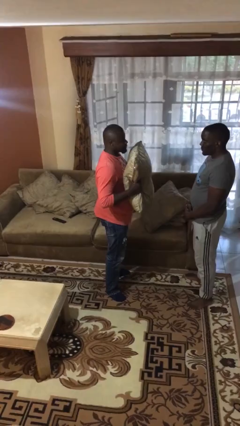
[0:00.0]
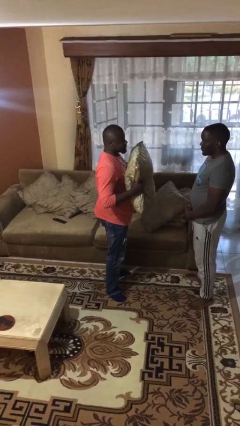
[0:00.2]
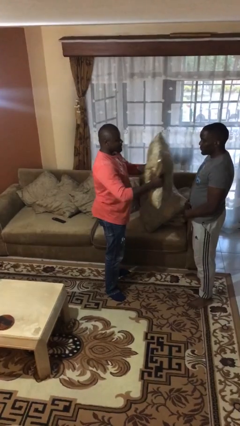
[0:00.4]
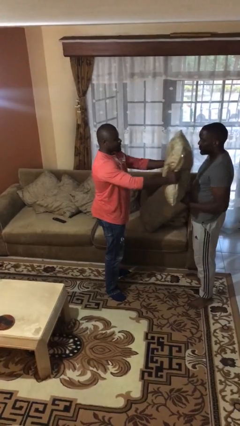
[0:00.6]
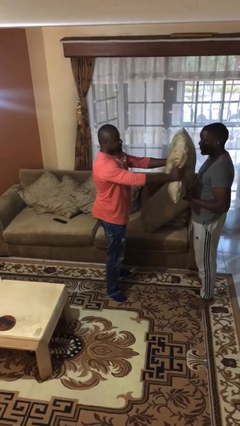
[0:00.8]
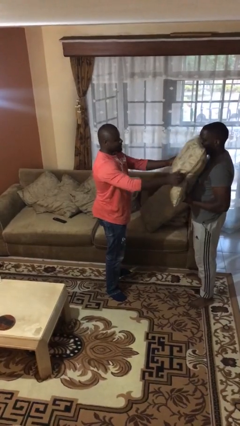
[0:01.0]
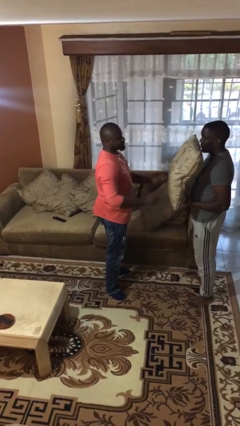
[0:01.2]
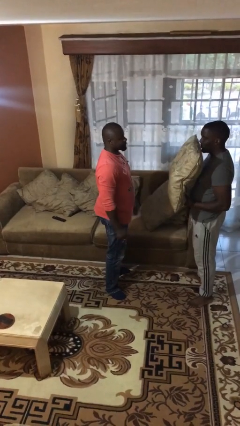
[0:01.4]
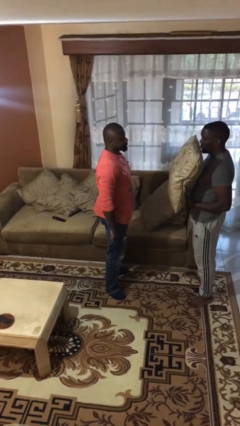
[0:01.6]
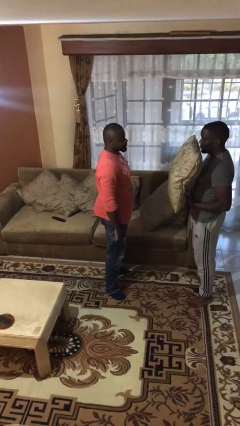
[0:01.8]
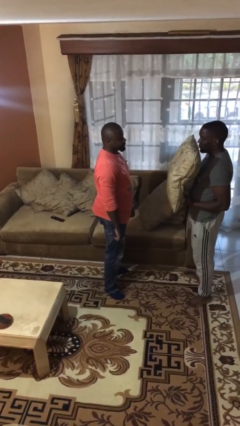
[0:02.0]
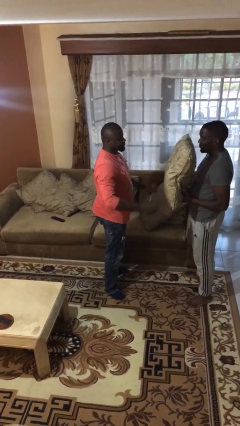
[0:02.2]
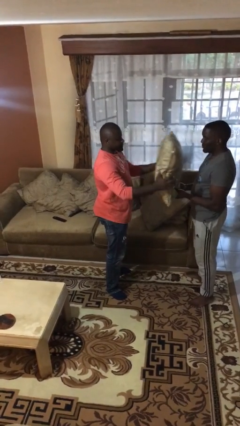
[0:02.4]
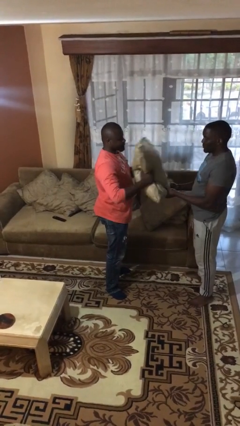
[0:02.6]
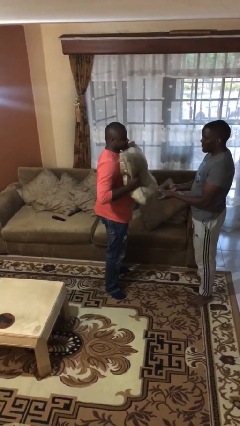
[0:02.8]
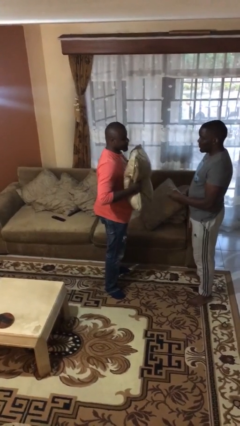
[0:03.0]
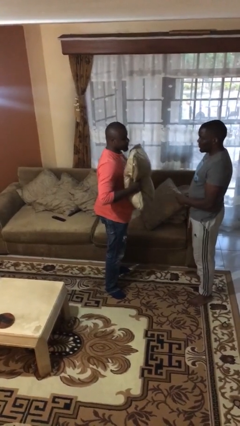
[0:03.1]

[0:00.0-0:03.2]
person transfers object to person

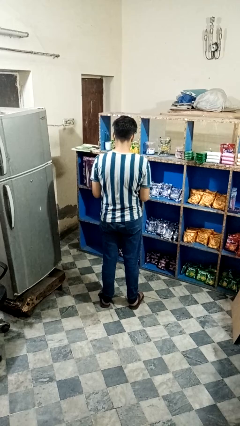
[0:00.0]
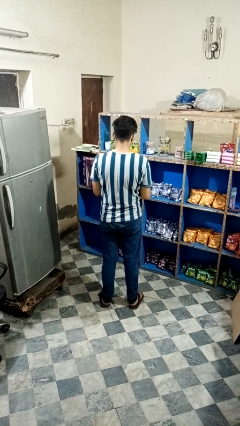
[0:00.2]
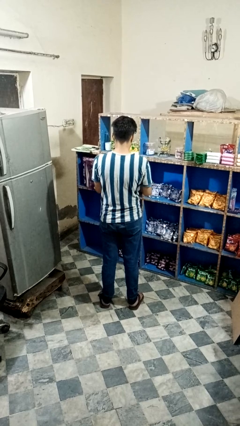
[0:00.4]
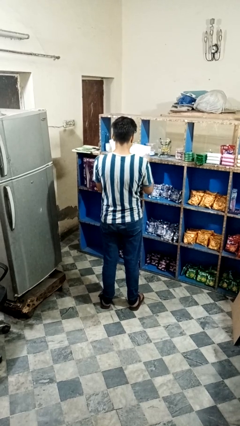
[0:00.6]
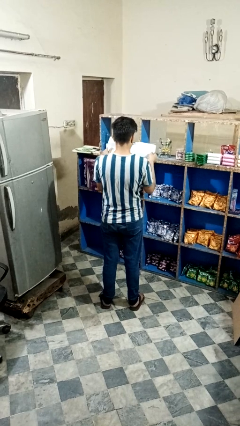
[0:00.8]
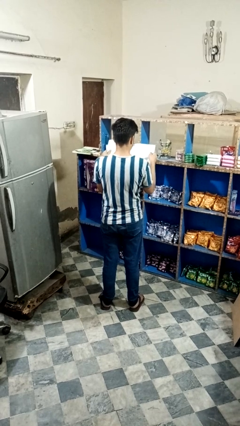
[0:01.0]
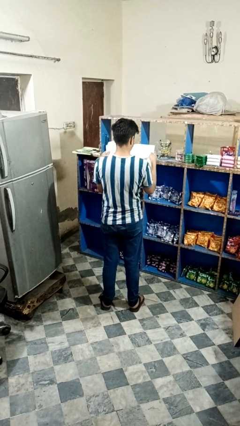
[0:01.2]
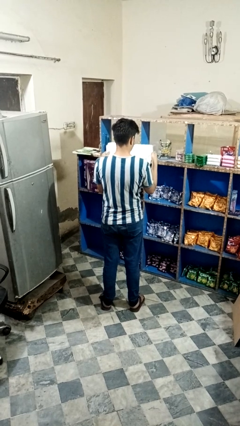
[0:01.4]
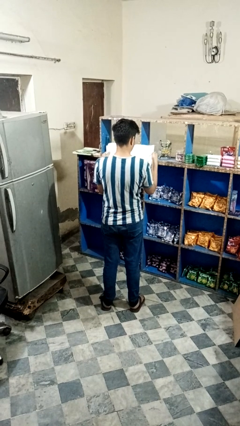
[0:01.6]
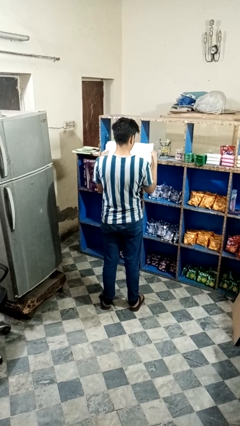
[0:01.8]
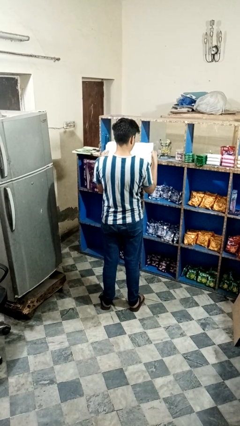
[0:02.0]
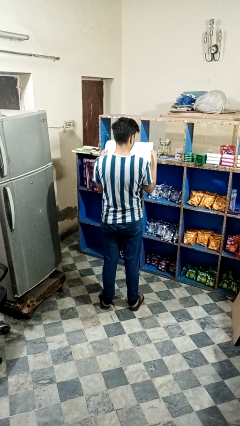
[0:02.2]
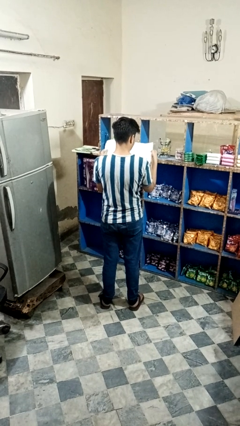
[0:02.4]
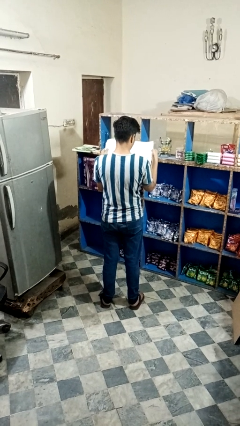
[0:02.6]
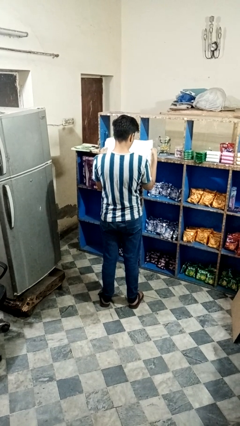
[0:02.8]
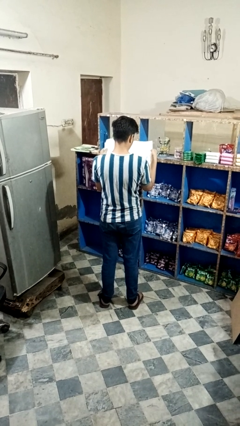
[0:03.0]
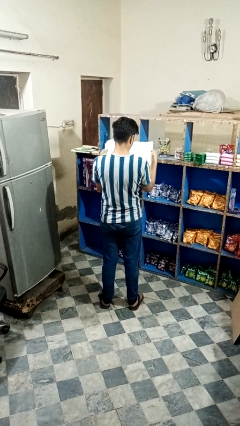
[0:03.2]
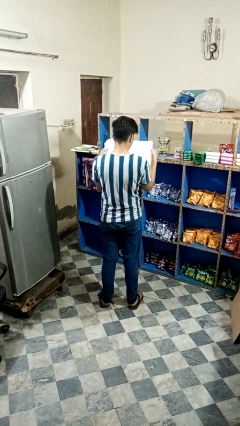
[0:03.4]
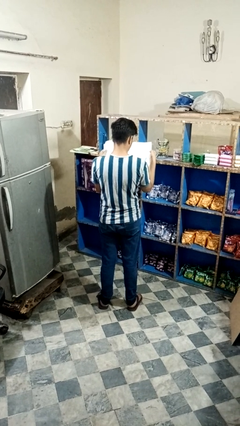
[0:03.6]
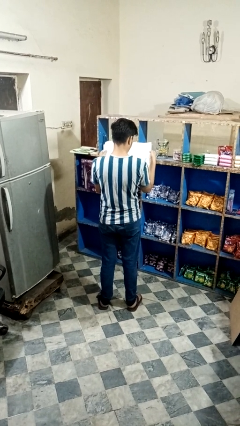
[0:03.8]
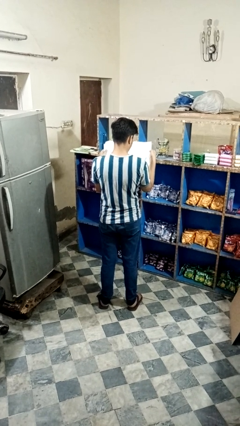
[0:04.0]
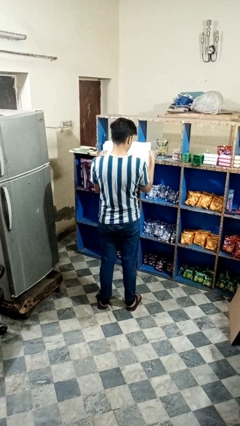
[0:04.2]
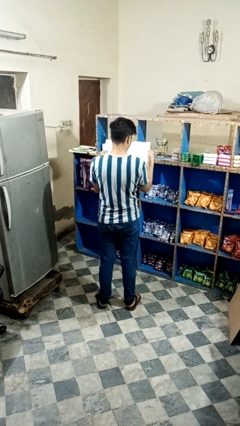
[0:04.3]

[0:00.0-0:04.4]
person reads newspaper

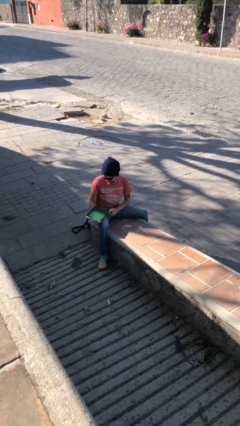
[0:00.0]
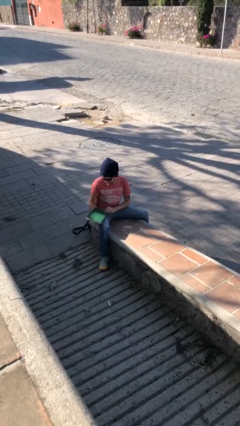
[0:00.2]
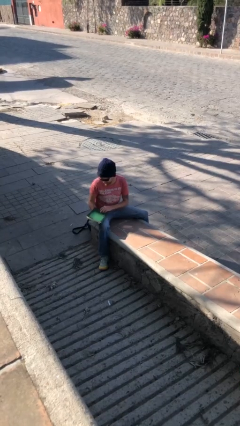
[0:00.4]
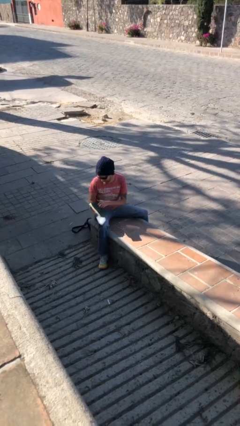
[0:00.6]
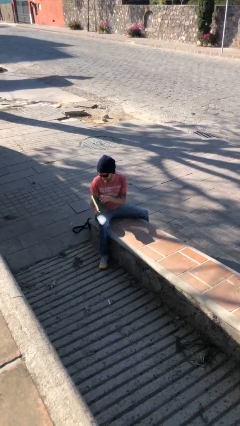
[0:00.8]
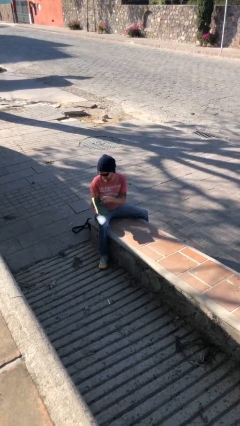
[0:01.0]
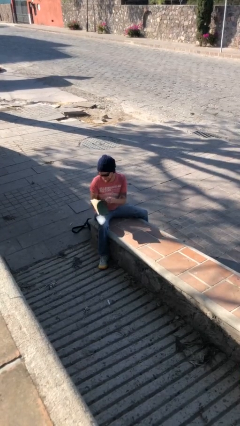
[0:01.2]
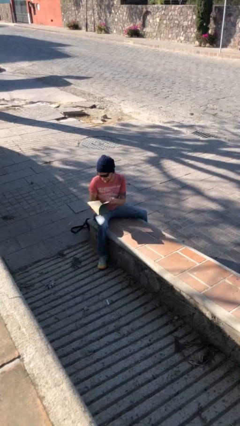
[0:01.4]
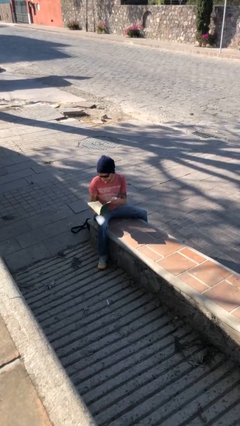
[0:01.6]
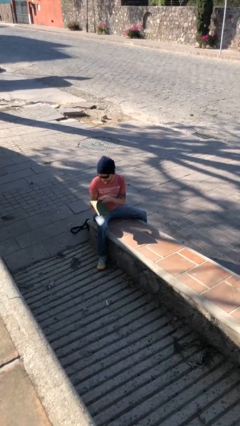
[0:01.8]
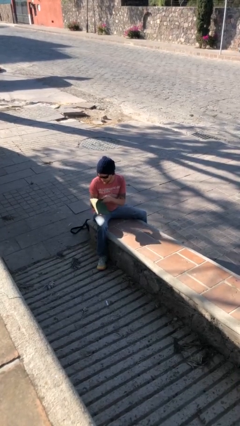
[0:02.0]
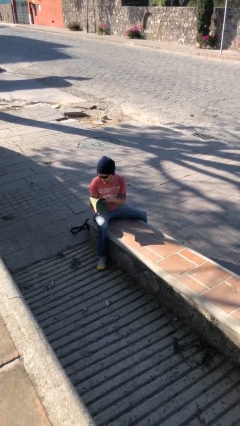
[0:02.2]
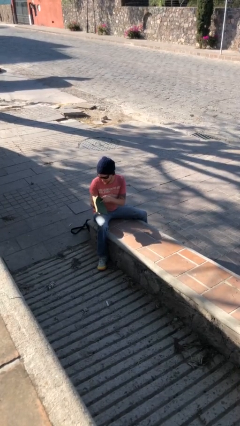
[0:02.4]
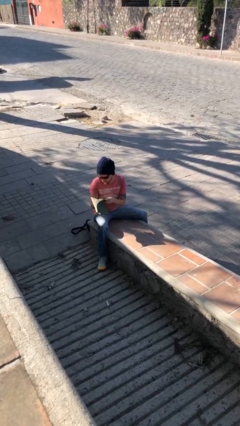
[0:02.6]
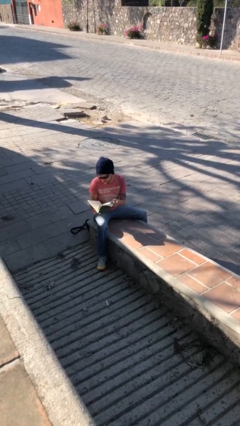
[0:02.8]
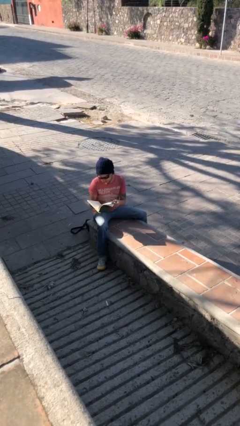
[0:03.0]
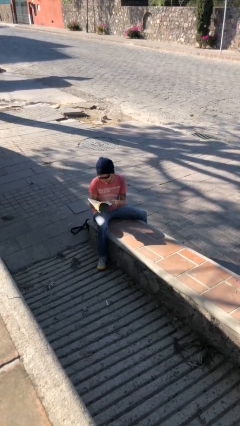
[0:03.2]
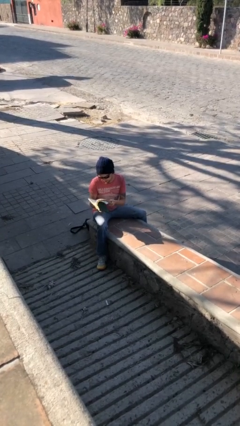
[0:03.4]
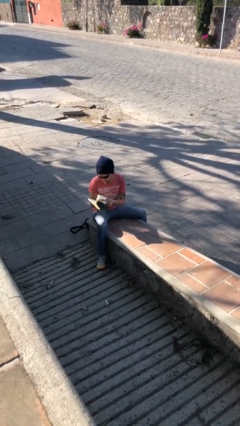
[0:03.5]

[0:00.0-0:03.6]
person reads document

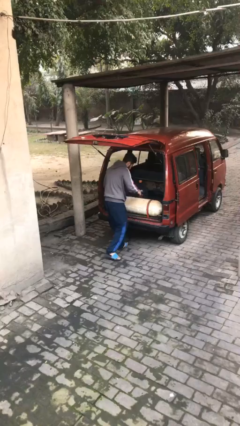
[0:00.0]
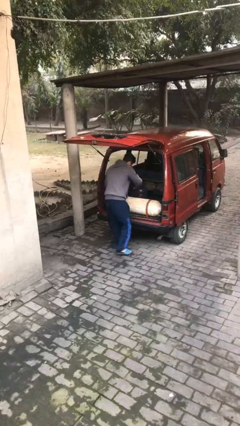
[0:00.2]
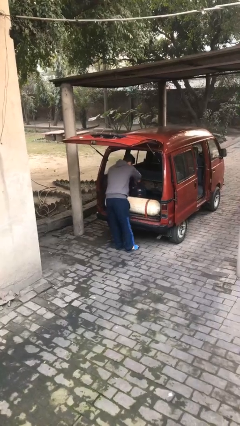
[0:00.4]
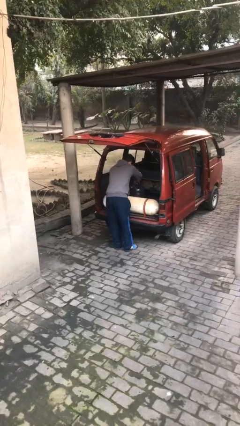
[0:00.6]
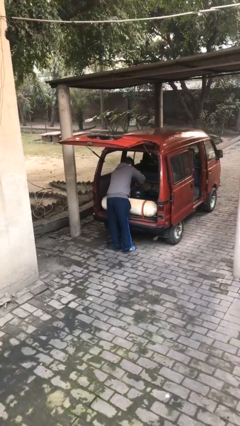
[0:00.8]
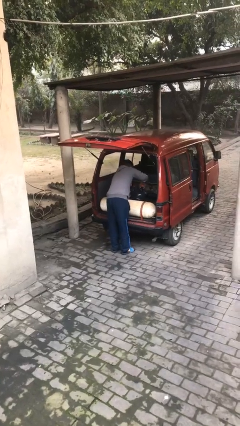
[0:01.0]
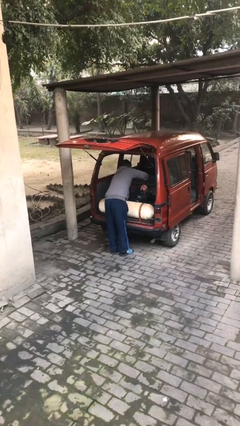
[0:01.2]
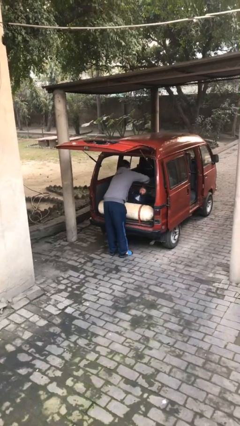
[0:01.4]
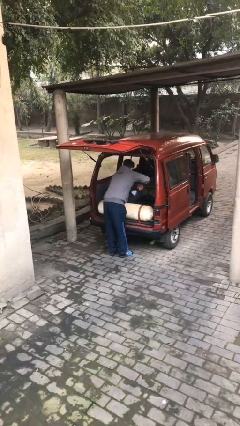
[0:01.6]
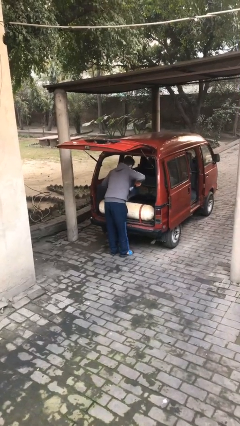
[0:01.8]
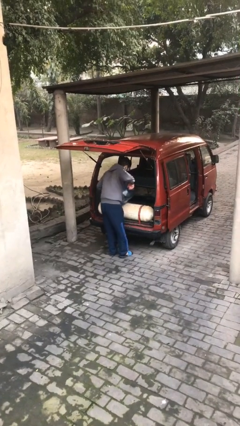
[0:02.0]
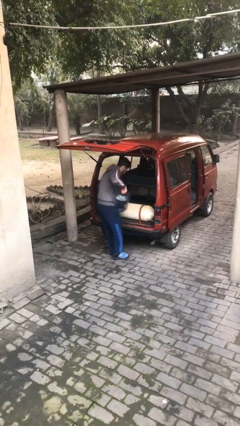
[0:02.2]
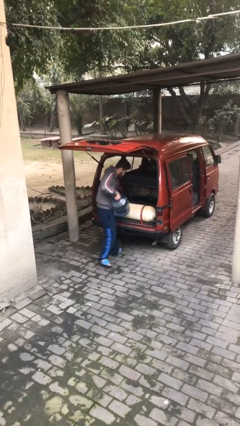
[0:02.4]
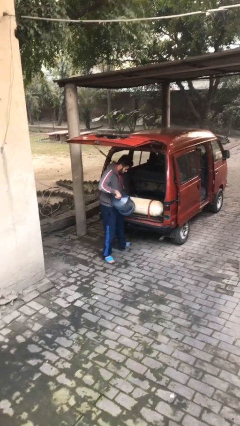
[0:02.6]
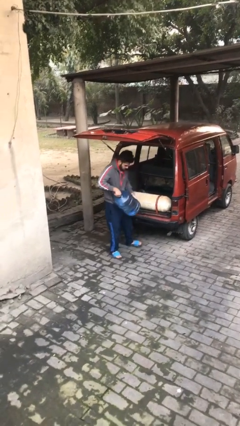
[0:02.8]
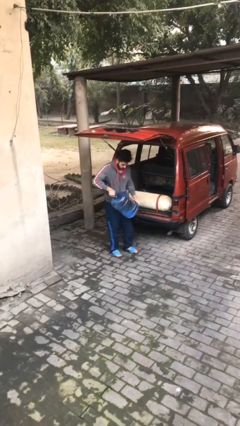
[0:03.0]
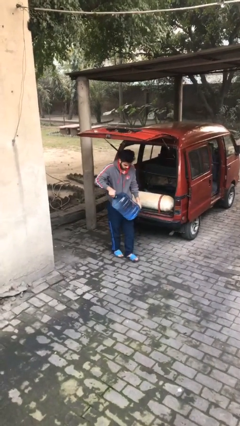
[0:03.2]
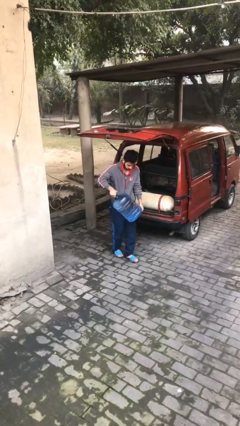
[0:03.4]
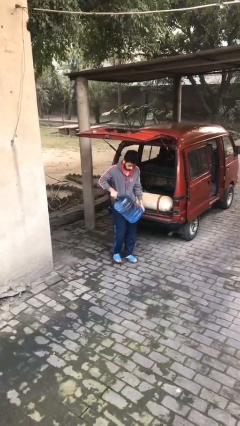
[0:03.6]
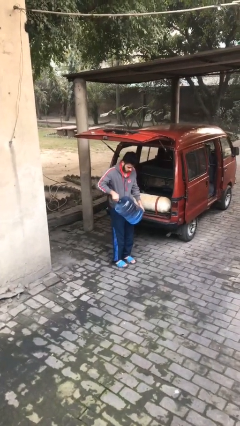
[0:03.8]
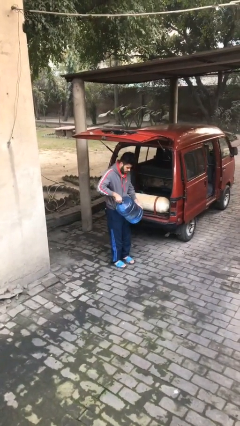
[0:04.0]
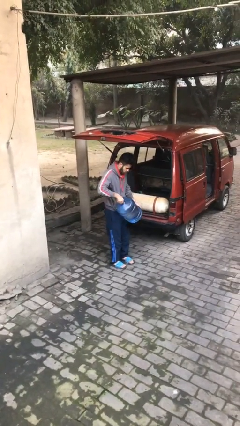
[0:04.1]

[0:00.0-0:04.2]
person unloads car

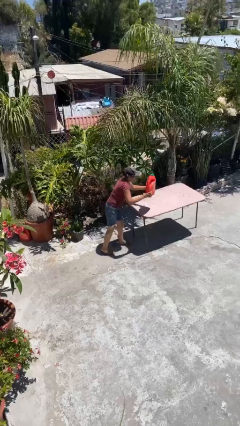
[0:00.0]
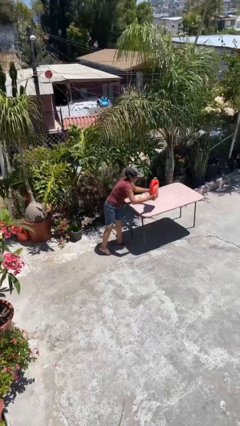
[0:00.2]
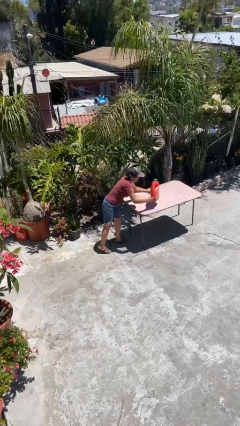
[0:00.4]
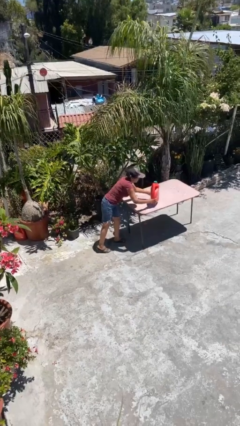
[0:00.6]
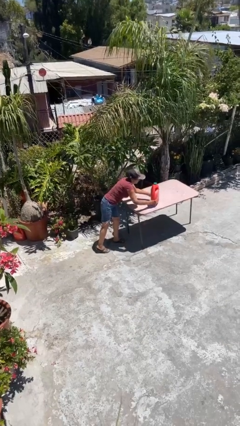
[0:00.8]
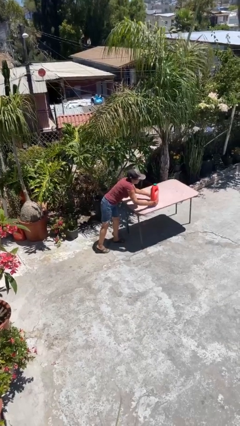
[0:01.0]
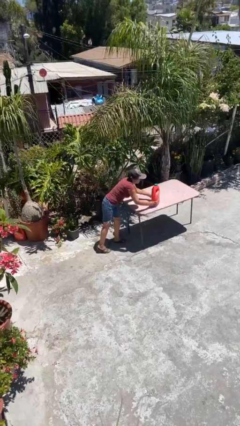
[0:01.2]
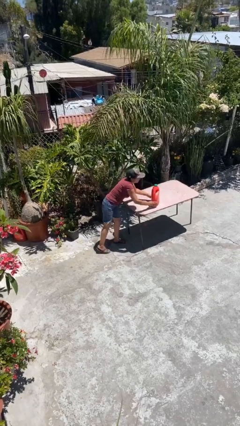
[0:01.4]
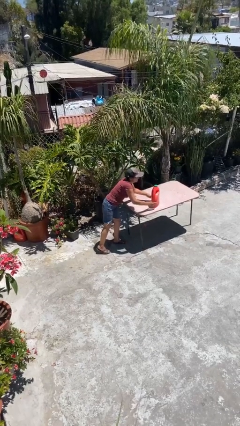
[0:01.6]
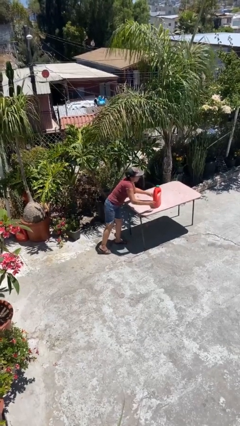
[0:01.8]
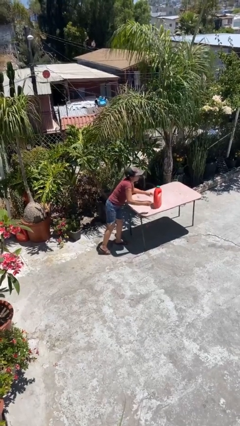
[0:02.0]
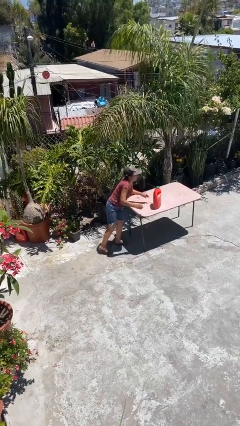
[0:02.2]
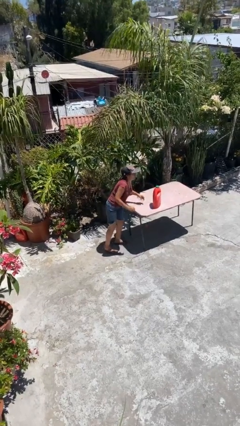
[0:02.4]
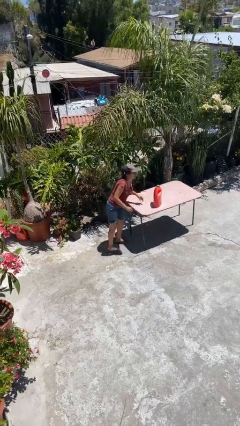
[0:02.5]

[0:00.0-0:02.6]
person puts down object on table
